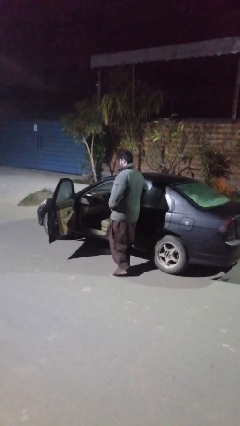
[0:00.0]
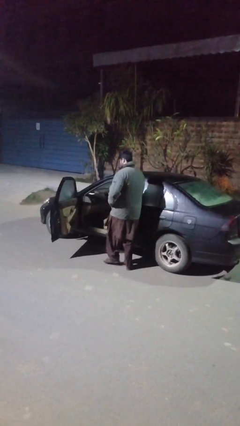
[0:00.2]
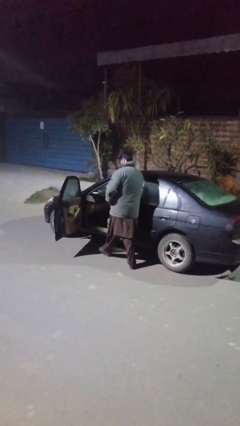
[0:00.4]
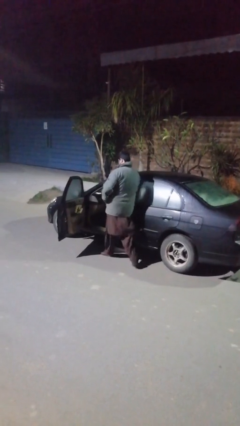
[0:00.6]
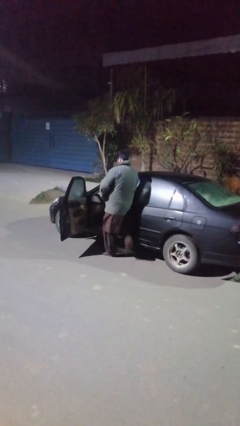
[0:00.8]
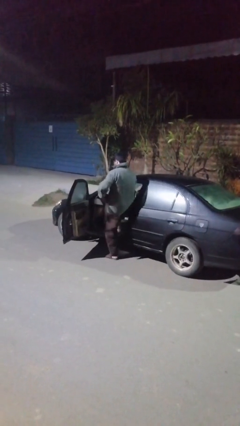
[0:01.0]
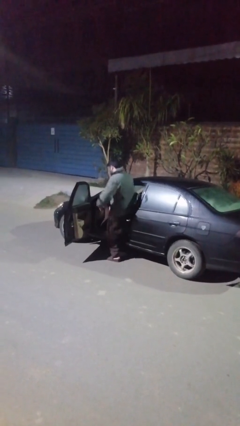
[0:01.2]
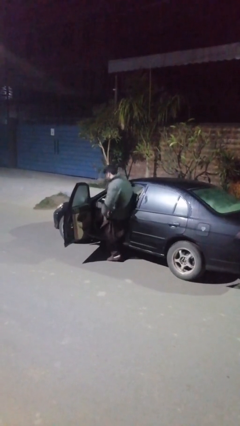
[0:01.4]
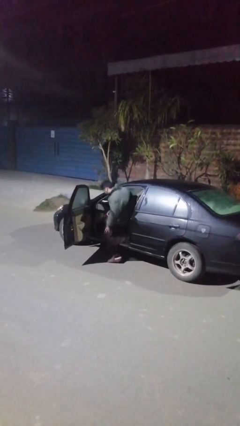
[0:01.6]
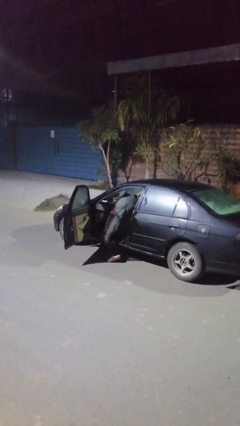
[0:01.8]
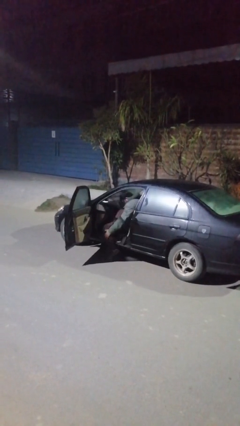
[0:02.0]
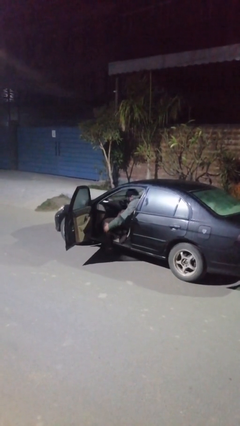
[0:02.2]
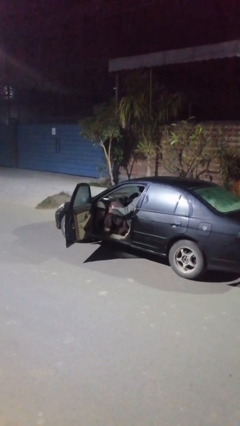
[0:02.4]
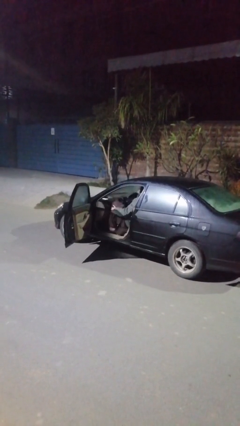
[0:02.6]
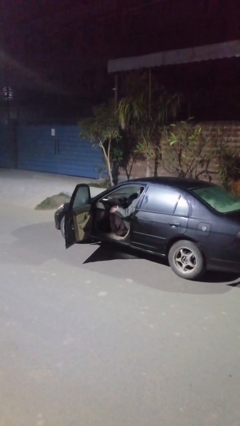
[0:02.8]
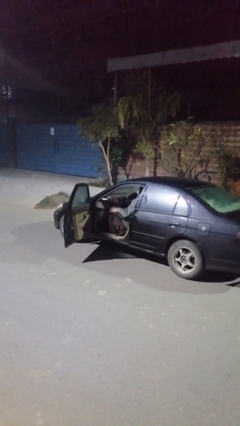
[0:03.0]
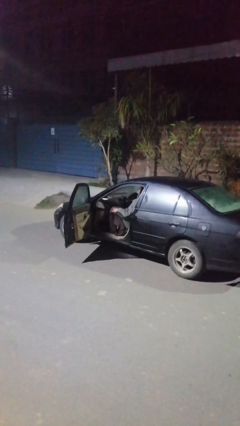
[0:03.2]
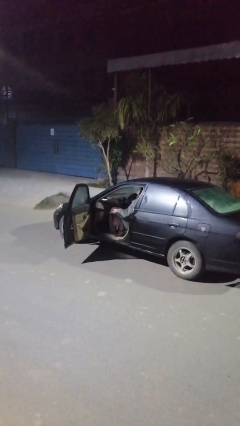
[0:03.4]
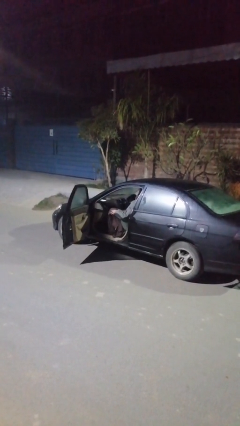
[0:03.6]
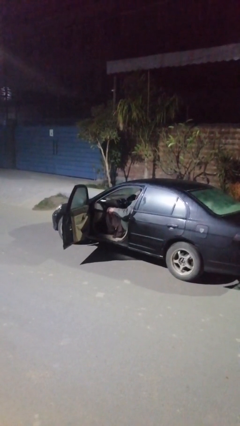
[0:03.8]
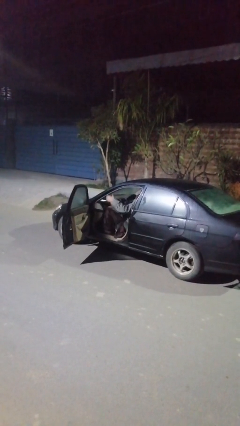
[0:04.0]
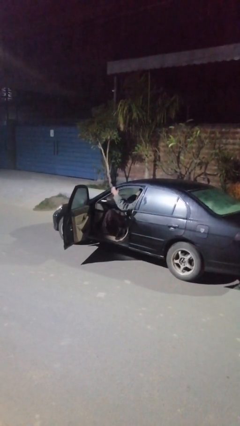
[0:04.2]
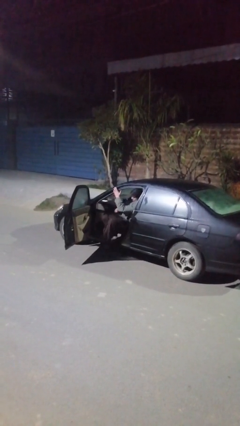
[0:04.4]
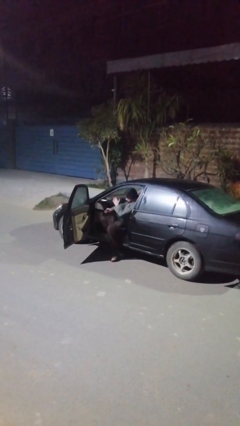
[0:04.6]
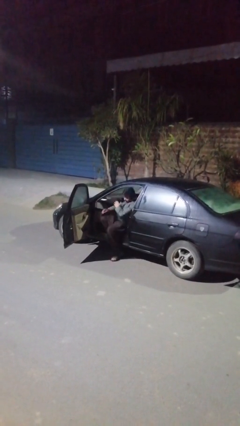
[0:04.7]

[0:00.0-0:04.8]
person enters car

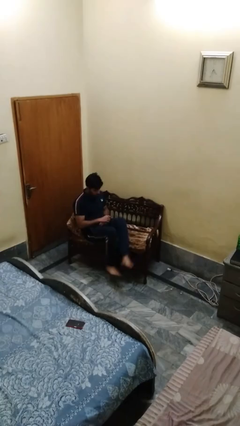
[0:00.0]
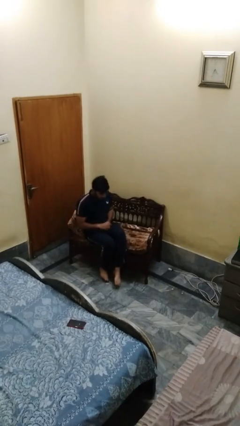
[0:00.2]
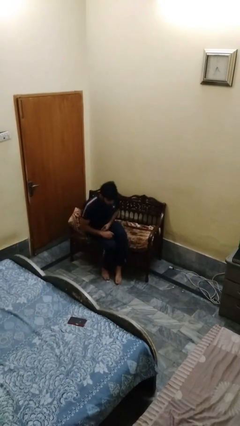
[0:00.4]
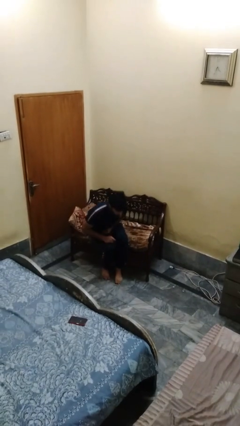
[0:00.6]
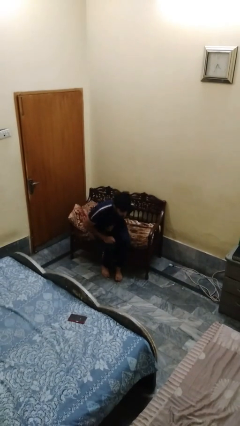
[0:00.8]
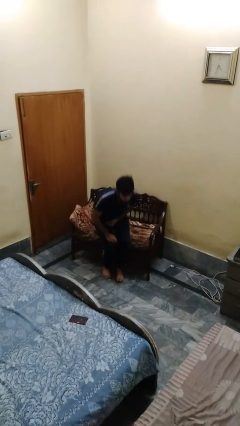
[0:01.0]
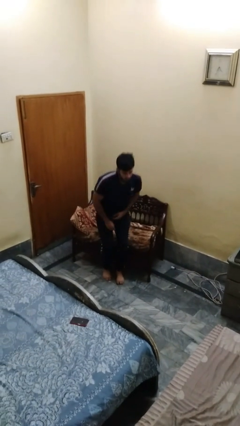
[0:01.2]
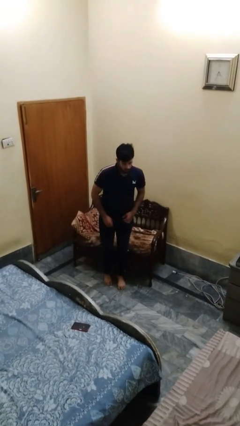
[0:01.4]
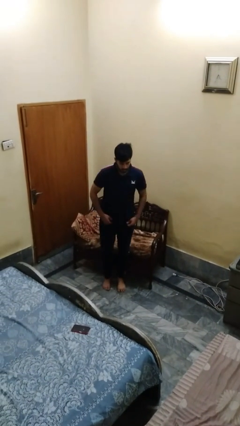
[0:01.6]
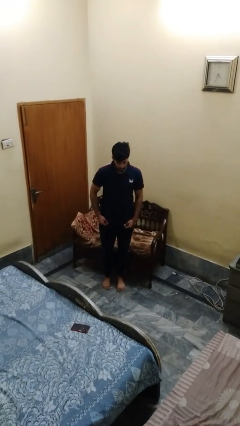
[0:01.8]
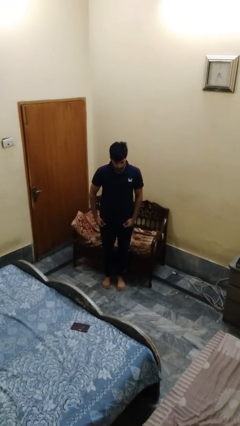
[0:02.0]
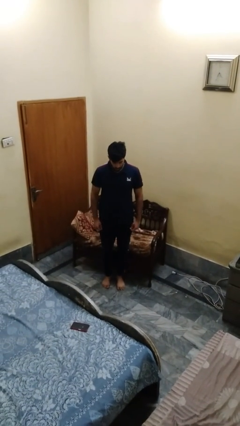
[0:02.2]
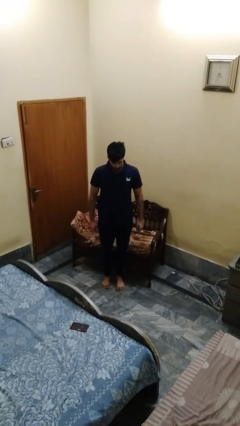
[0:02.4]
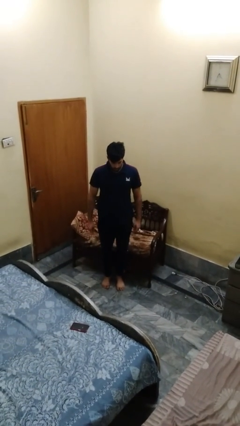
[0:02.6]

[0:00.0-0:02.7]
person stands up

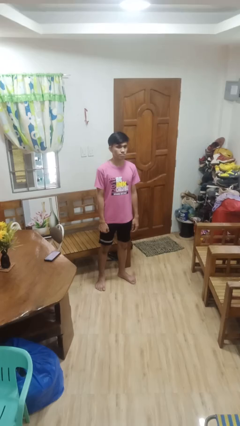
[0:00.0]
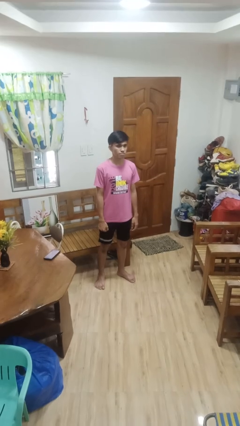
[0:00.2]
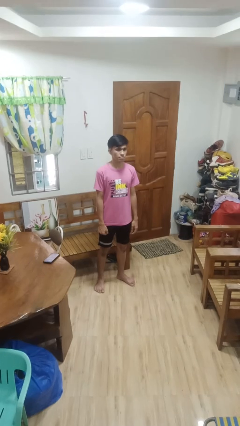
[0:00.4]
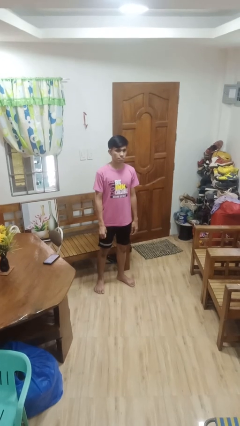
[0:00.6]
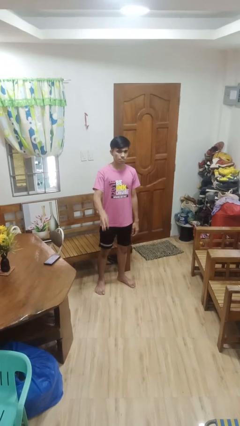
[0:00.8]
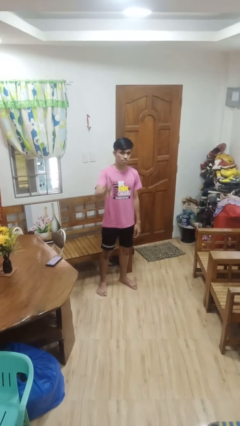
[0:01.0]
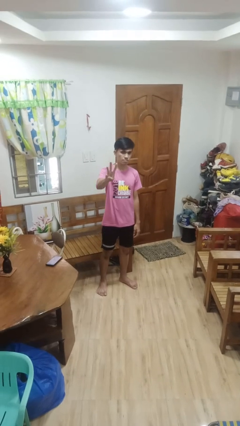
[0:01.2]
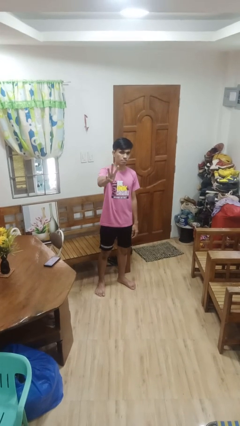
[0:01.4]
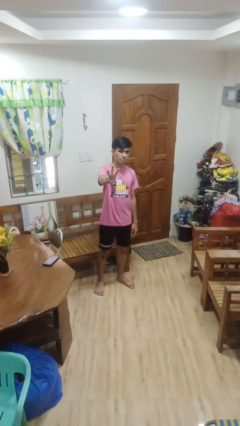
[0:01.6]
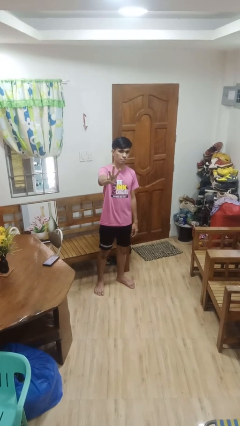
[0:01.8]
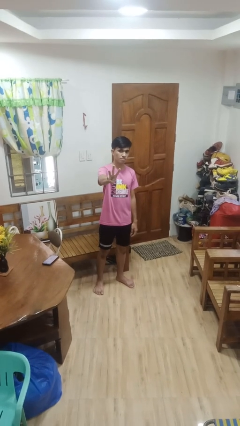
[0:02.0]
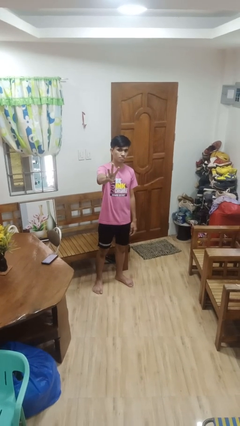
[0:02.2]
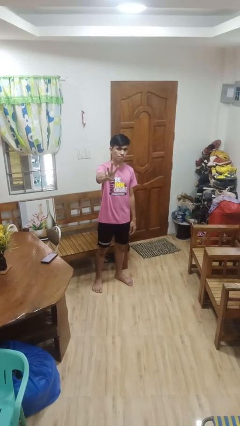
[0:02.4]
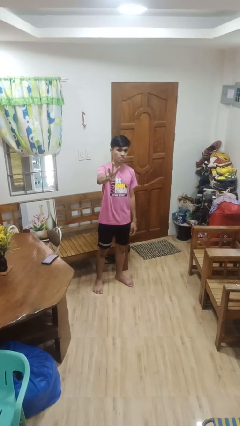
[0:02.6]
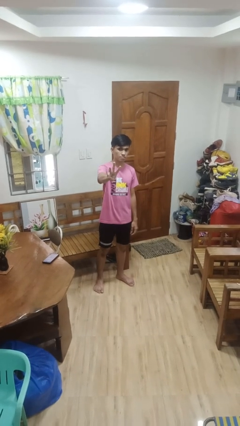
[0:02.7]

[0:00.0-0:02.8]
person gestures number three

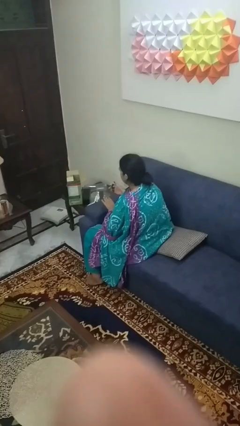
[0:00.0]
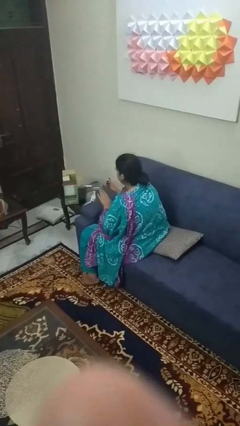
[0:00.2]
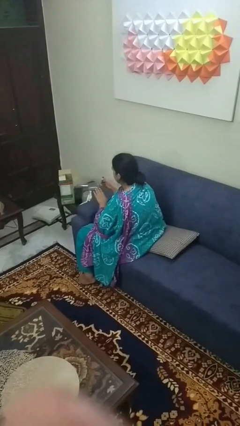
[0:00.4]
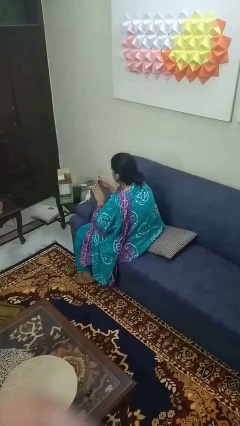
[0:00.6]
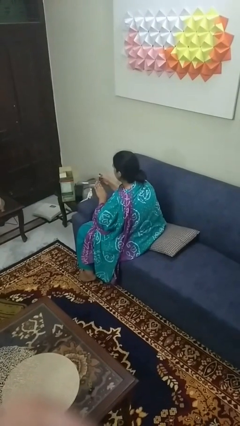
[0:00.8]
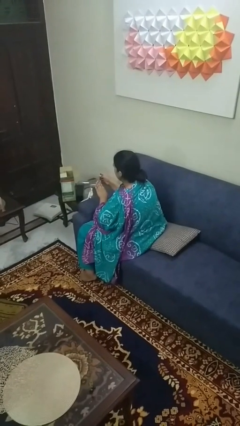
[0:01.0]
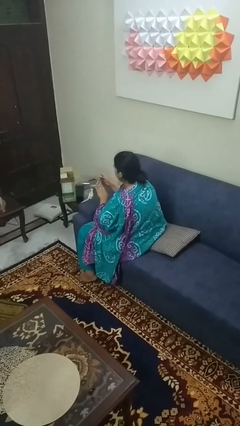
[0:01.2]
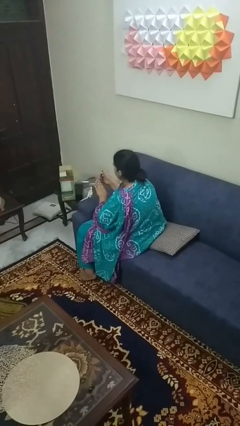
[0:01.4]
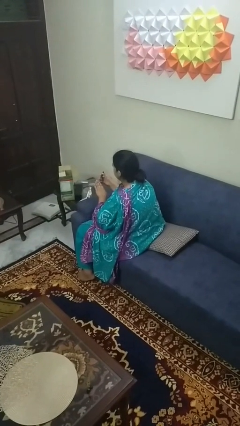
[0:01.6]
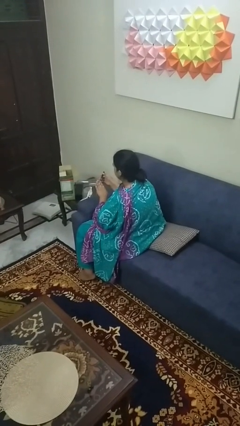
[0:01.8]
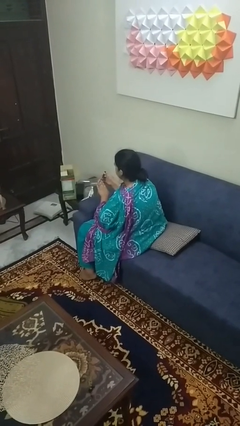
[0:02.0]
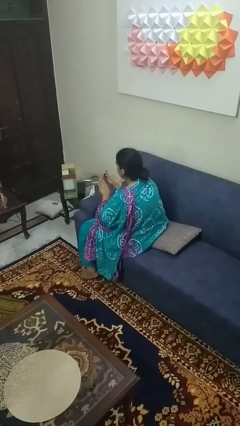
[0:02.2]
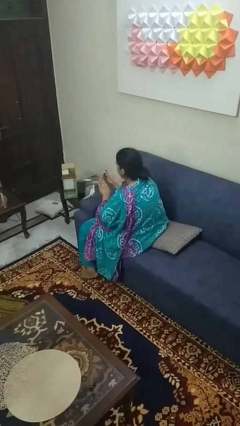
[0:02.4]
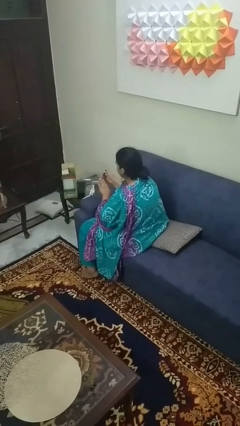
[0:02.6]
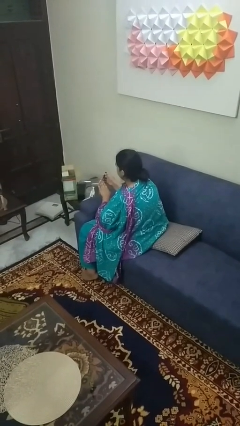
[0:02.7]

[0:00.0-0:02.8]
person clips fingernails

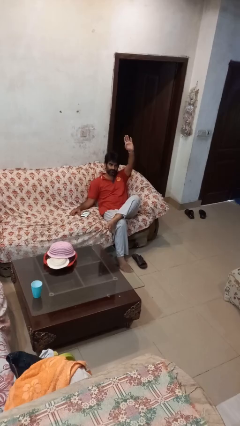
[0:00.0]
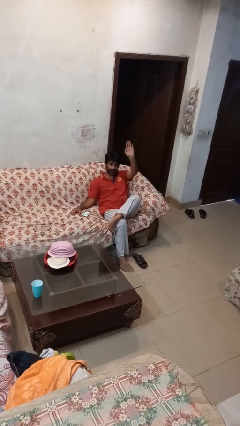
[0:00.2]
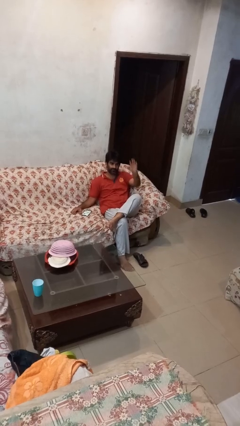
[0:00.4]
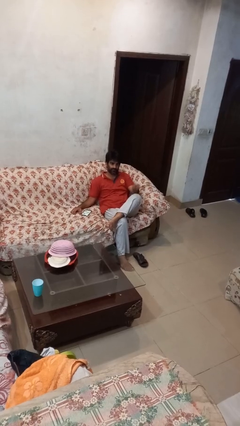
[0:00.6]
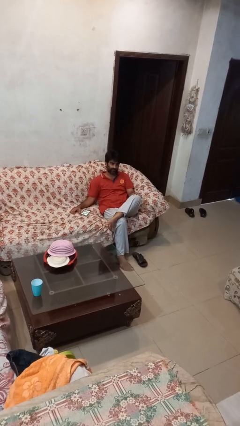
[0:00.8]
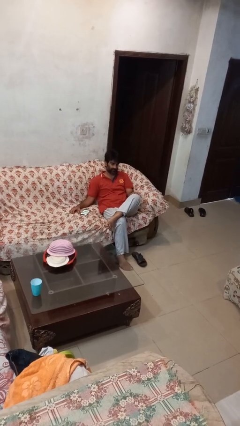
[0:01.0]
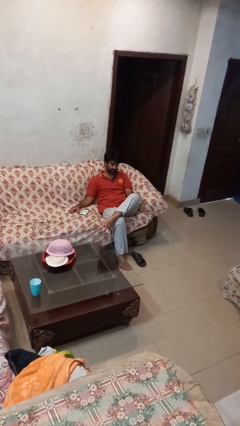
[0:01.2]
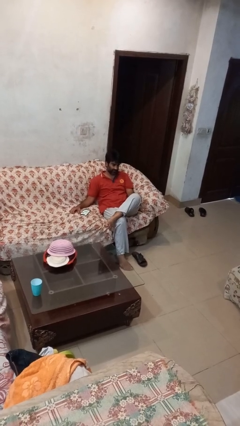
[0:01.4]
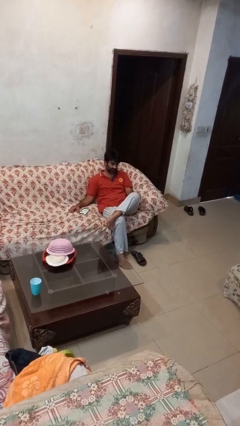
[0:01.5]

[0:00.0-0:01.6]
person gestures lower hand

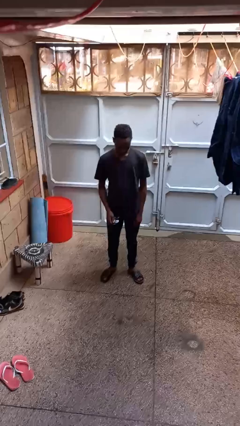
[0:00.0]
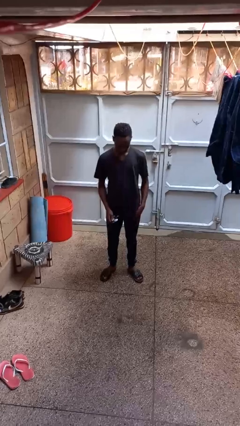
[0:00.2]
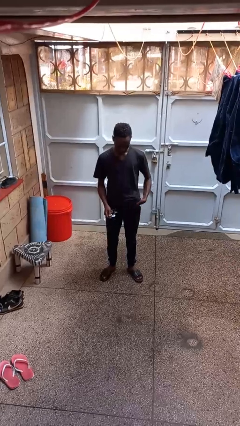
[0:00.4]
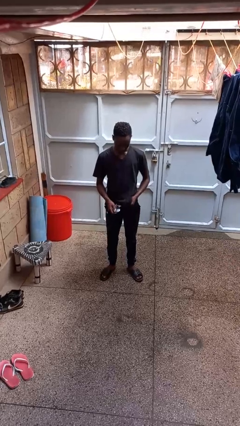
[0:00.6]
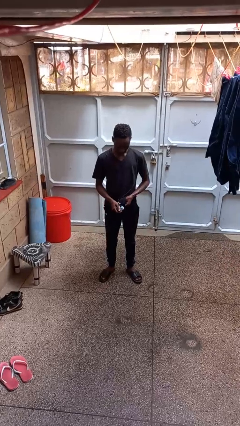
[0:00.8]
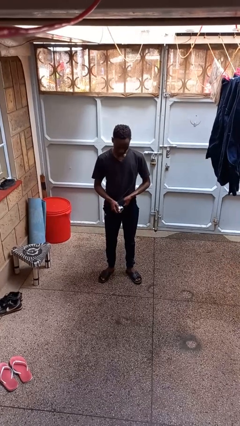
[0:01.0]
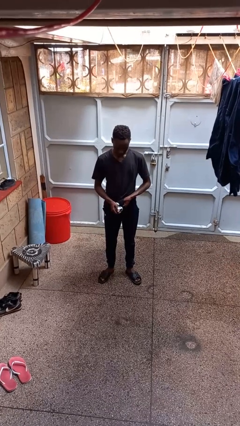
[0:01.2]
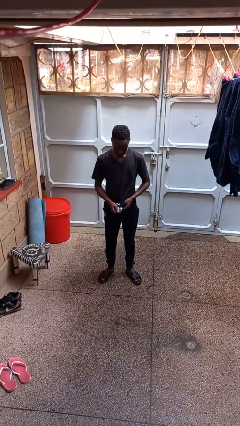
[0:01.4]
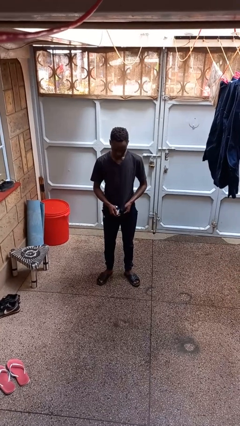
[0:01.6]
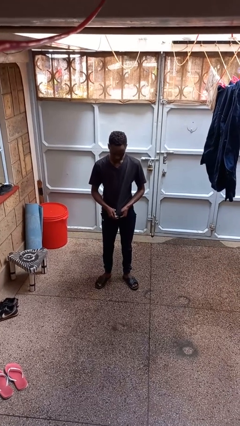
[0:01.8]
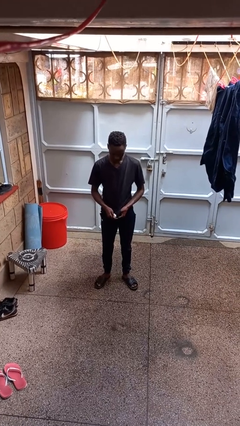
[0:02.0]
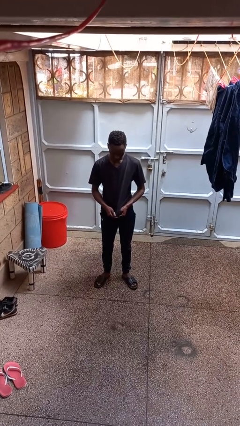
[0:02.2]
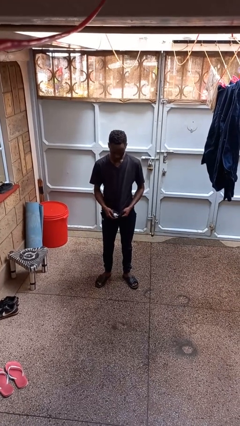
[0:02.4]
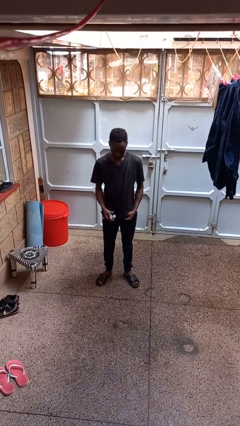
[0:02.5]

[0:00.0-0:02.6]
person cleans eyeglasses
